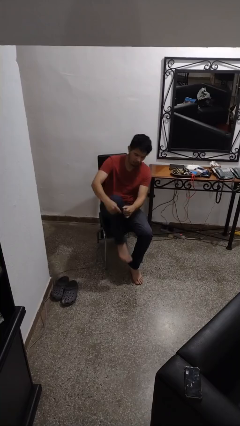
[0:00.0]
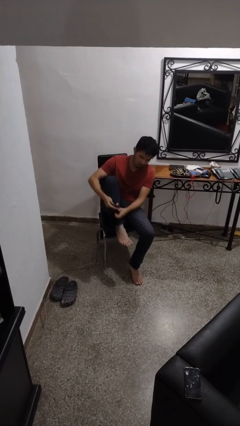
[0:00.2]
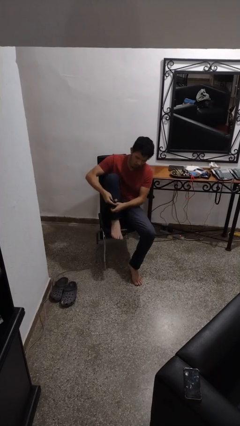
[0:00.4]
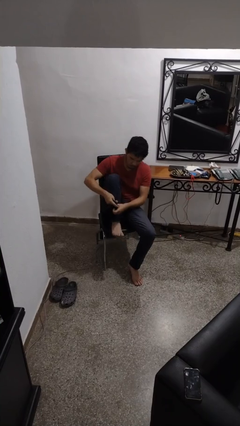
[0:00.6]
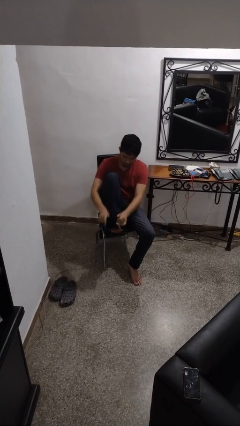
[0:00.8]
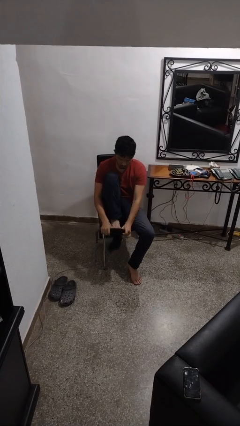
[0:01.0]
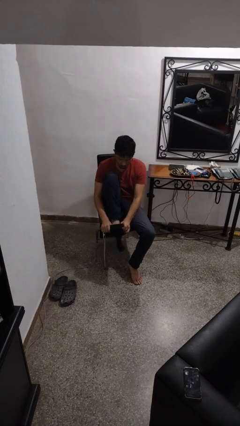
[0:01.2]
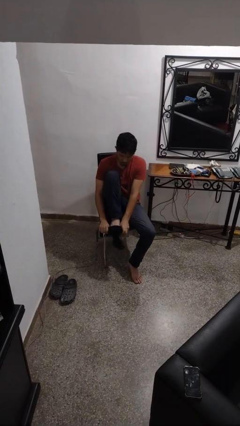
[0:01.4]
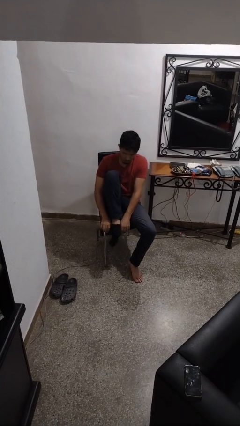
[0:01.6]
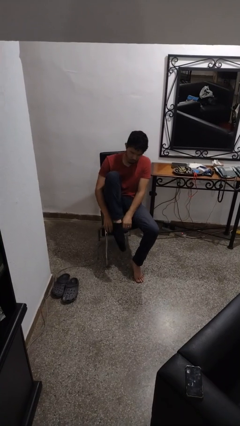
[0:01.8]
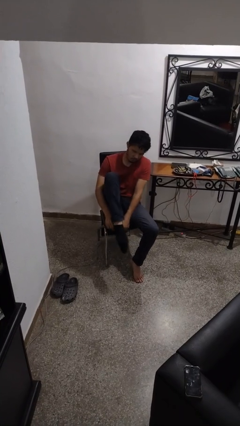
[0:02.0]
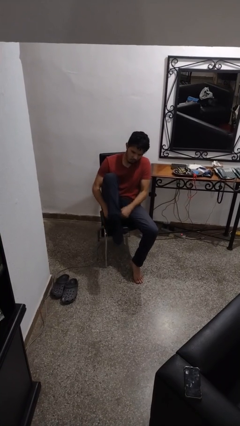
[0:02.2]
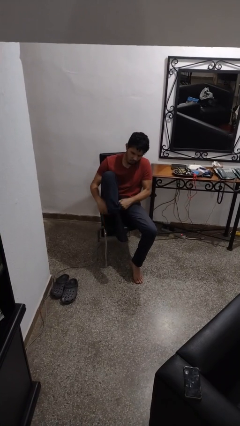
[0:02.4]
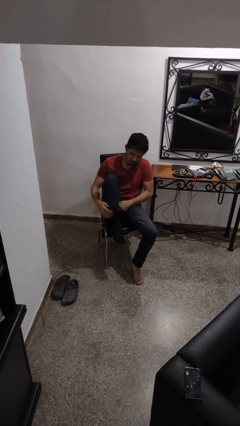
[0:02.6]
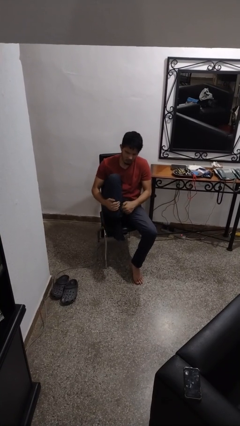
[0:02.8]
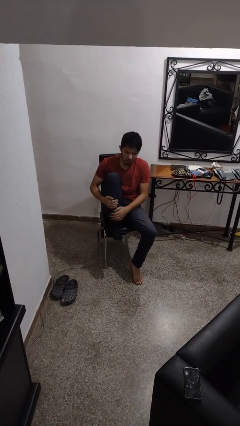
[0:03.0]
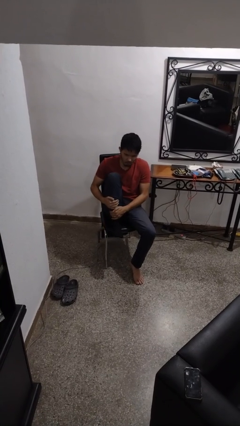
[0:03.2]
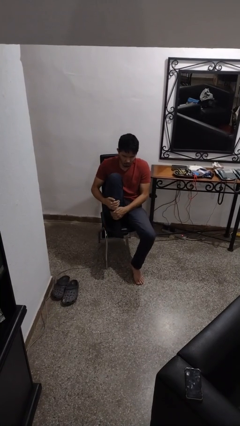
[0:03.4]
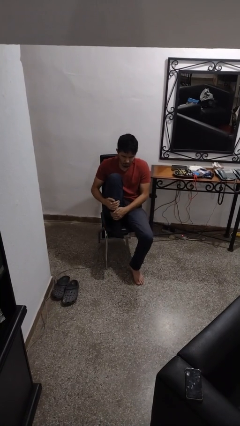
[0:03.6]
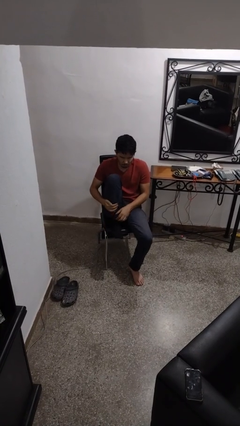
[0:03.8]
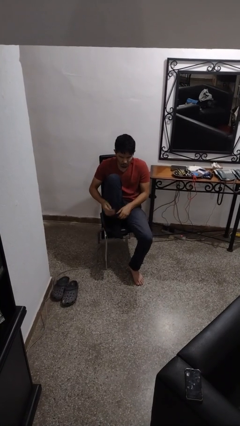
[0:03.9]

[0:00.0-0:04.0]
person puts on socks

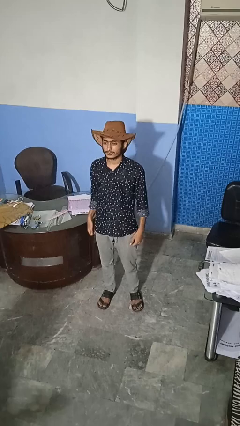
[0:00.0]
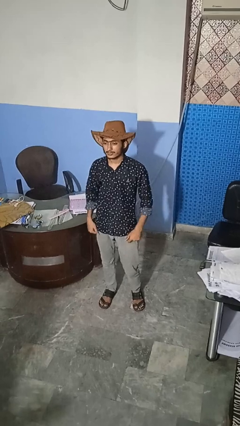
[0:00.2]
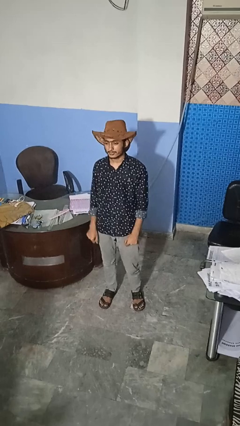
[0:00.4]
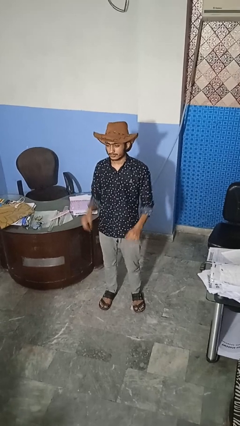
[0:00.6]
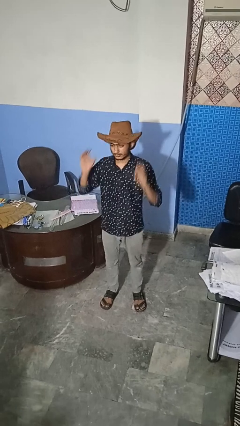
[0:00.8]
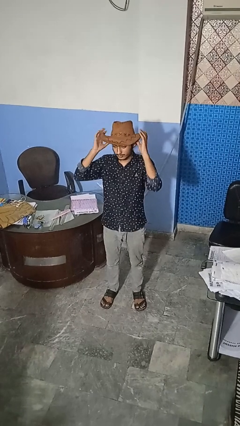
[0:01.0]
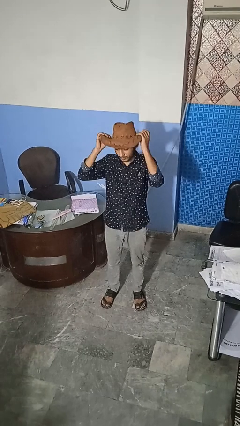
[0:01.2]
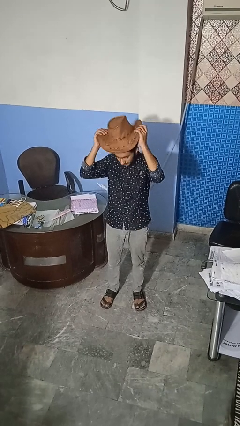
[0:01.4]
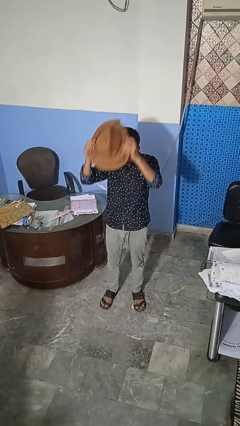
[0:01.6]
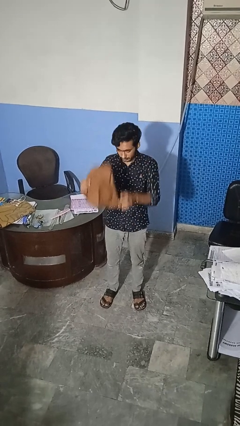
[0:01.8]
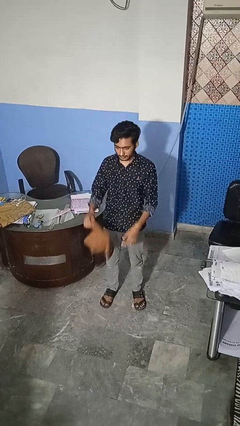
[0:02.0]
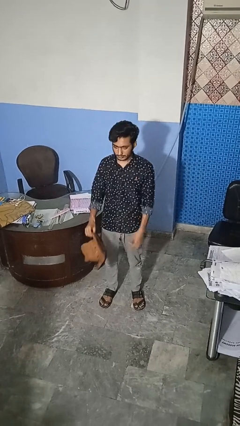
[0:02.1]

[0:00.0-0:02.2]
person takes off hat

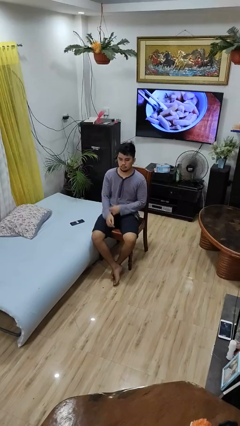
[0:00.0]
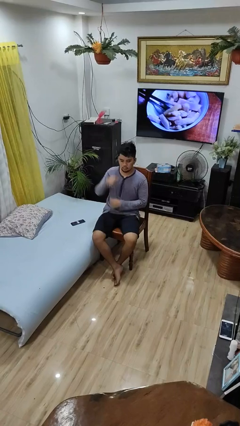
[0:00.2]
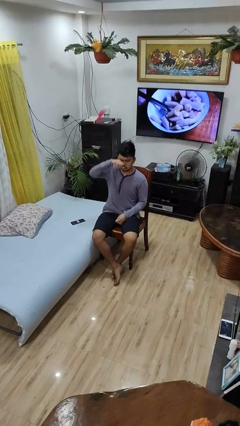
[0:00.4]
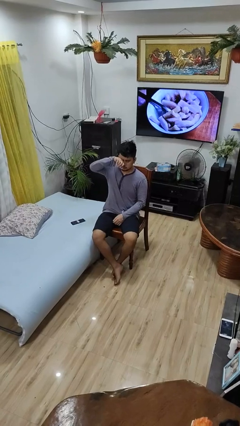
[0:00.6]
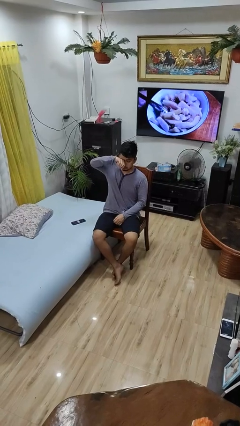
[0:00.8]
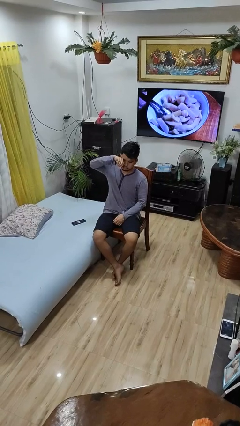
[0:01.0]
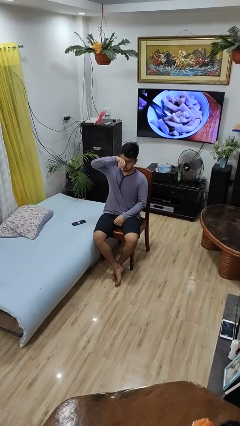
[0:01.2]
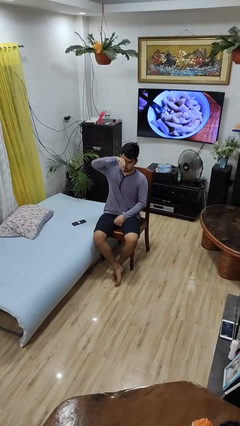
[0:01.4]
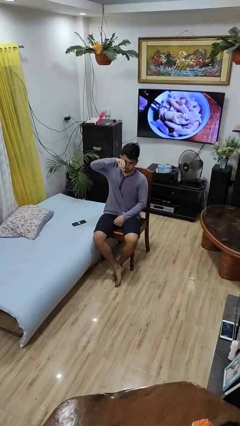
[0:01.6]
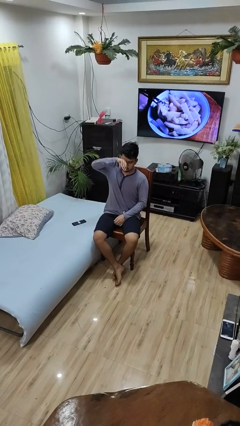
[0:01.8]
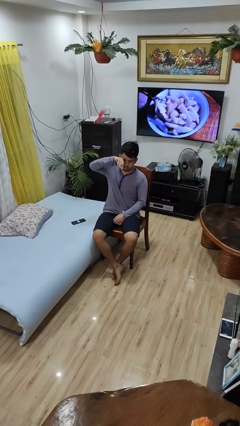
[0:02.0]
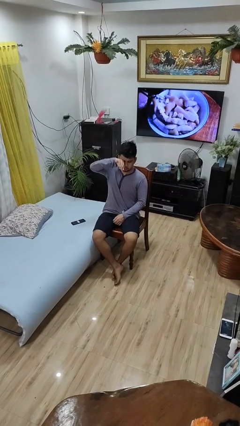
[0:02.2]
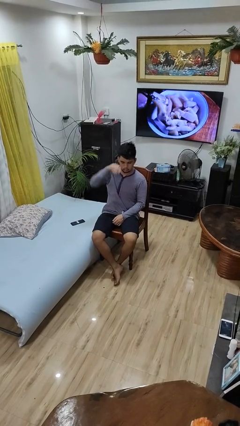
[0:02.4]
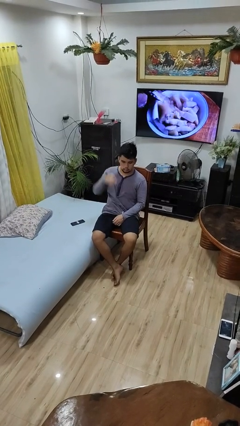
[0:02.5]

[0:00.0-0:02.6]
person rubs eyes

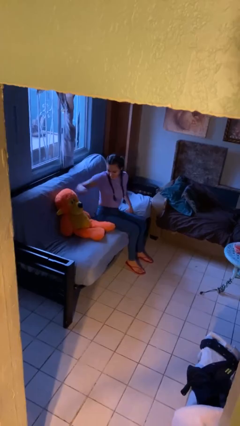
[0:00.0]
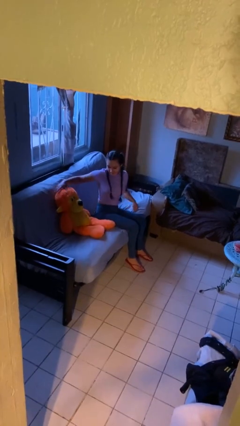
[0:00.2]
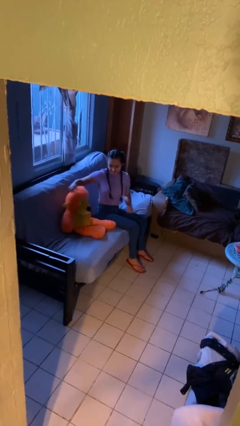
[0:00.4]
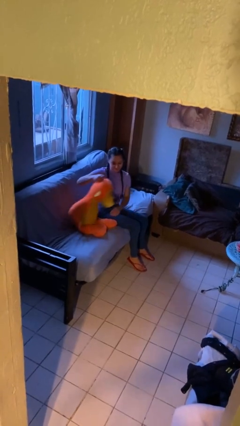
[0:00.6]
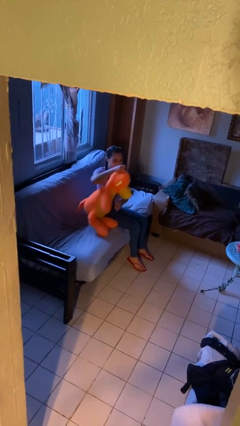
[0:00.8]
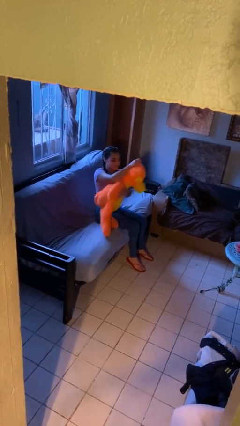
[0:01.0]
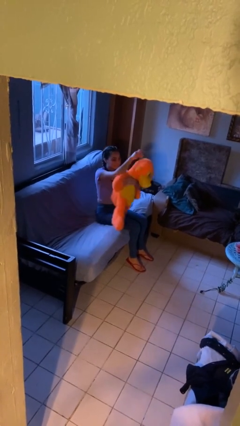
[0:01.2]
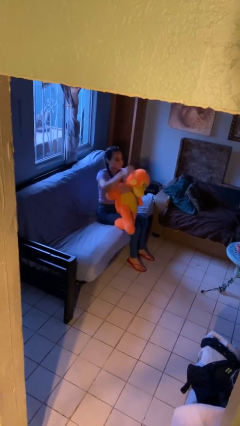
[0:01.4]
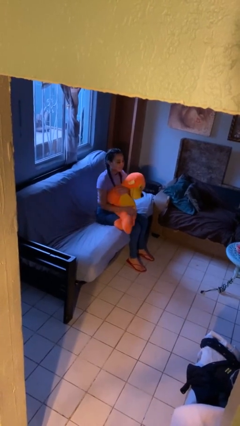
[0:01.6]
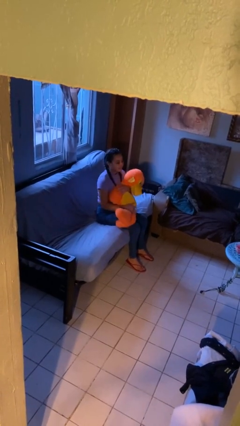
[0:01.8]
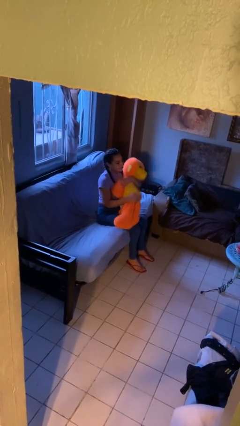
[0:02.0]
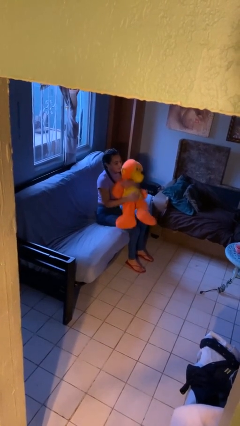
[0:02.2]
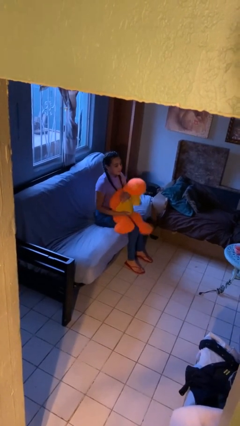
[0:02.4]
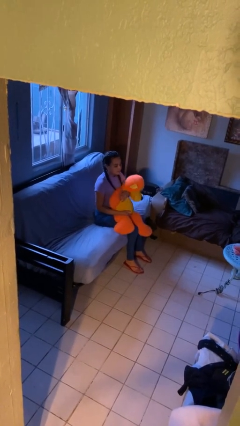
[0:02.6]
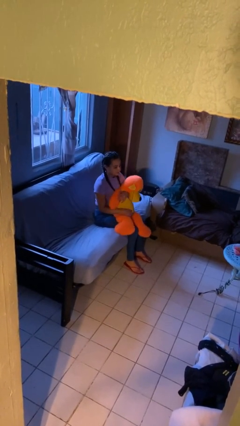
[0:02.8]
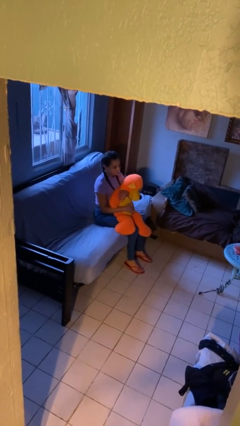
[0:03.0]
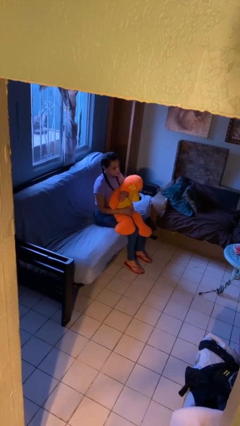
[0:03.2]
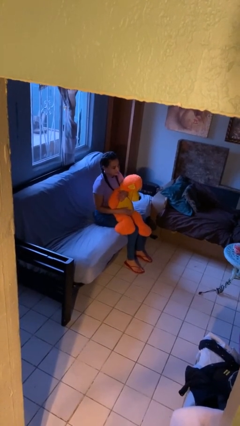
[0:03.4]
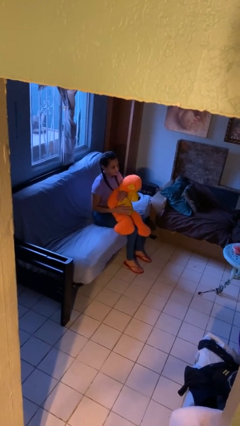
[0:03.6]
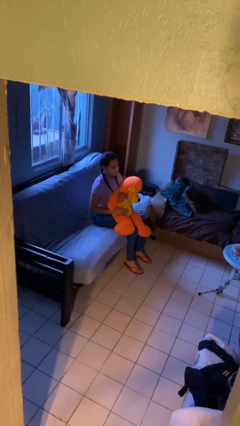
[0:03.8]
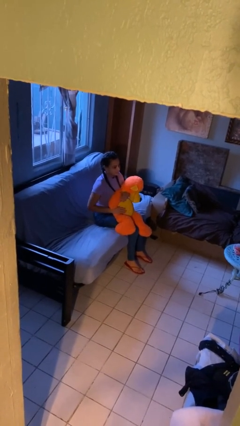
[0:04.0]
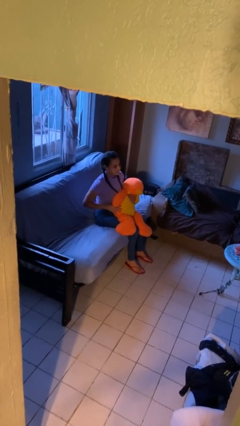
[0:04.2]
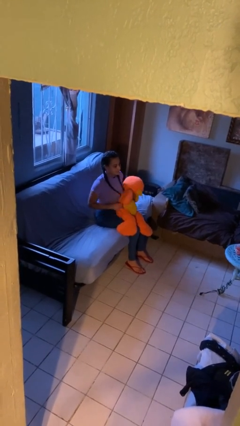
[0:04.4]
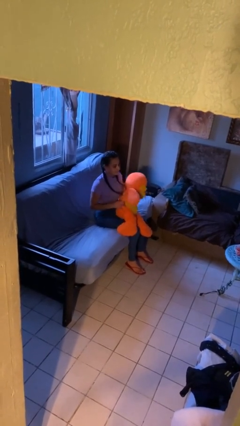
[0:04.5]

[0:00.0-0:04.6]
person hugs stuffed animal

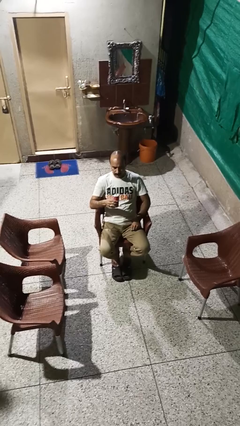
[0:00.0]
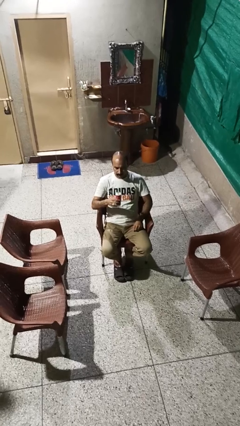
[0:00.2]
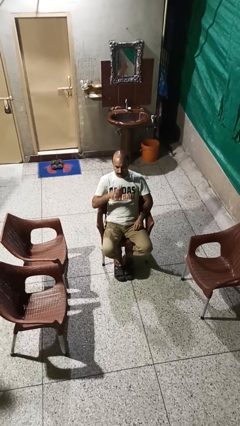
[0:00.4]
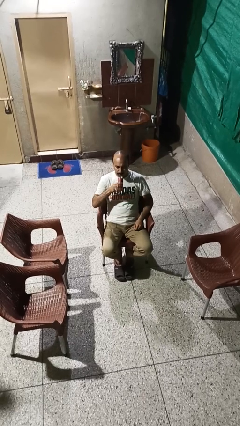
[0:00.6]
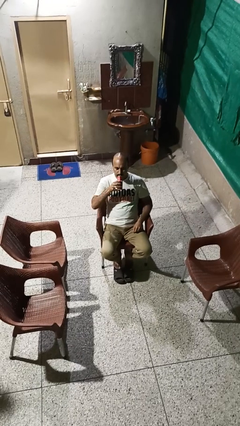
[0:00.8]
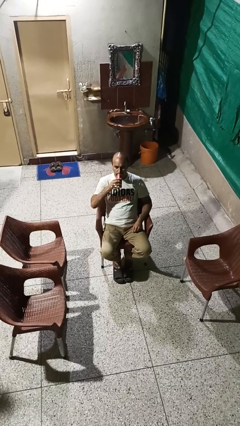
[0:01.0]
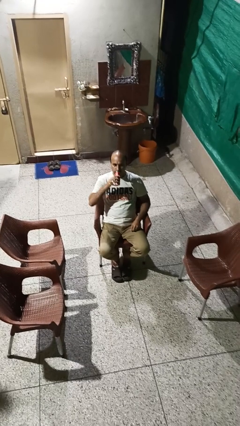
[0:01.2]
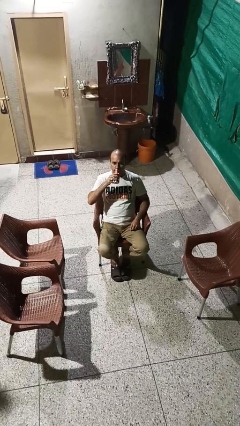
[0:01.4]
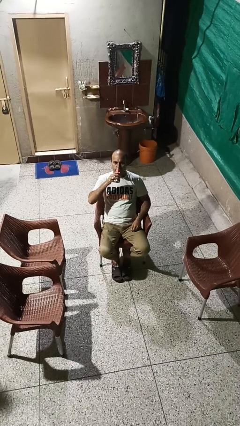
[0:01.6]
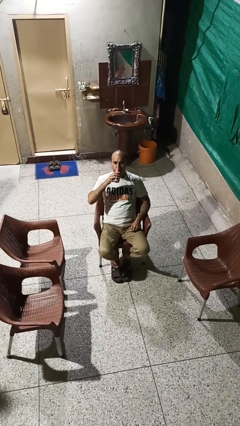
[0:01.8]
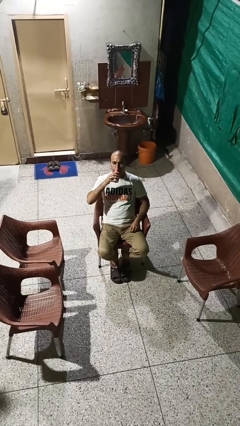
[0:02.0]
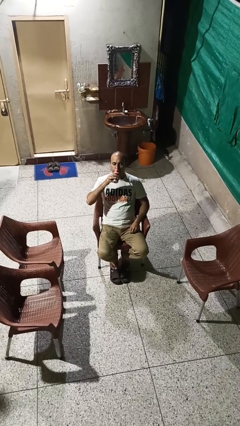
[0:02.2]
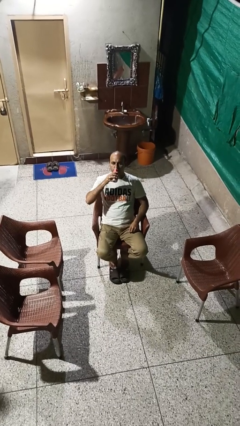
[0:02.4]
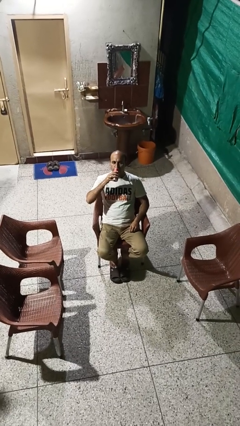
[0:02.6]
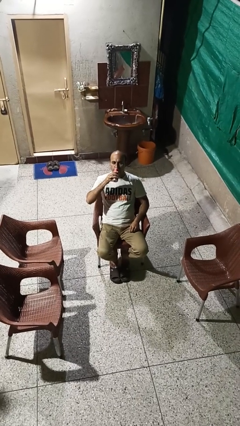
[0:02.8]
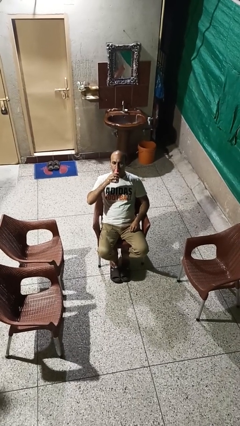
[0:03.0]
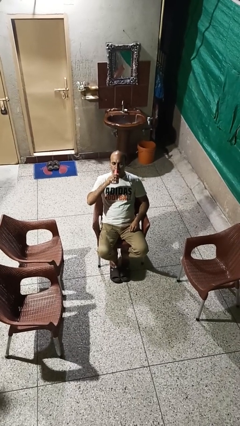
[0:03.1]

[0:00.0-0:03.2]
person drinks from beverage can

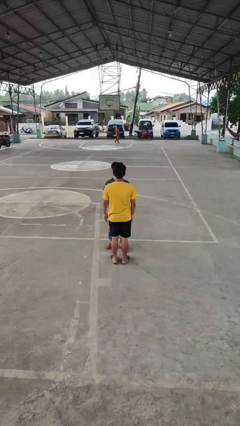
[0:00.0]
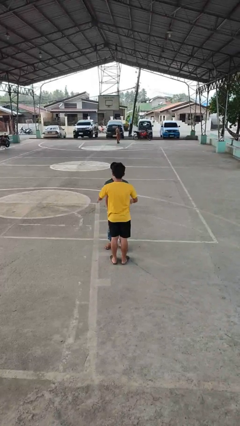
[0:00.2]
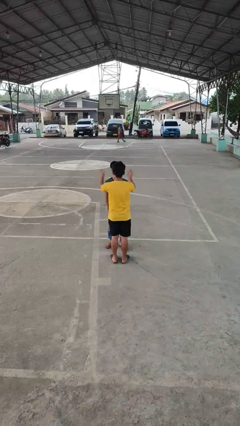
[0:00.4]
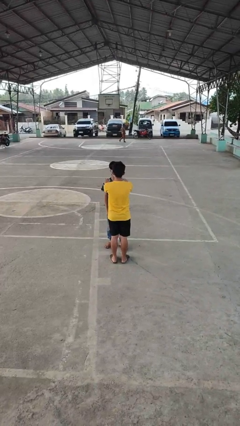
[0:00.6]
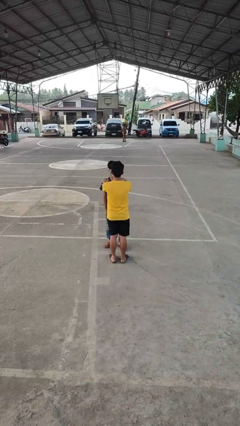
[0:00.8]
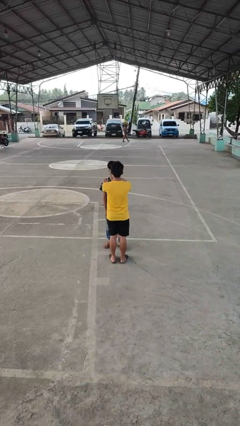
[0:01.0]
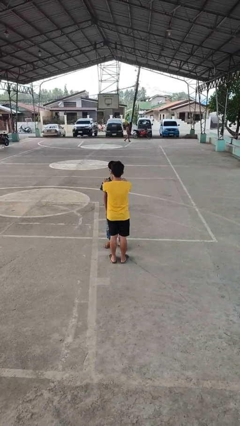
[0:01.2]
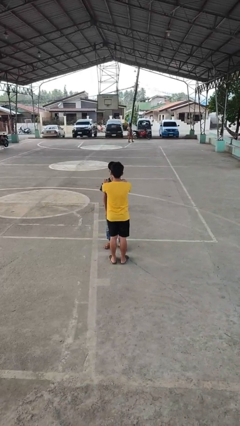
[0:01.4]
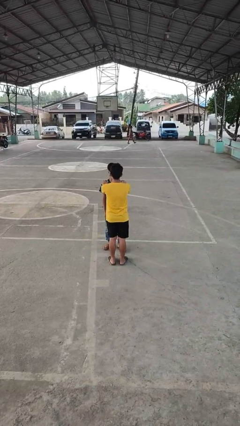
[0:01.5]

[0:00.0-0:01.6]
person grabs person by shoulder
